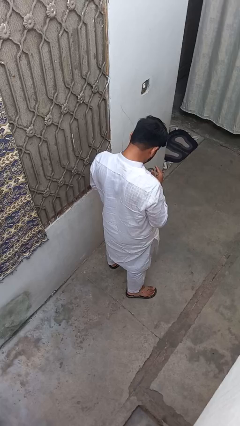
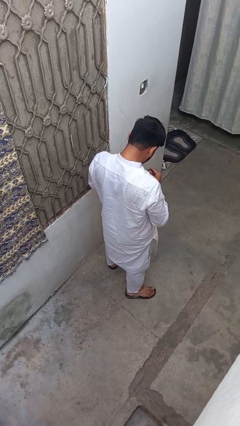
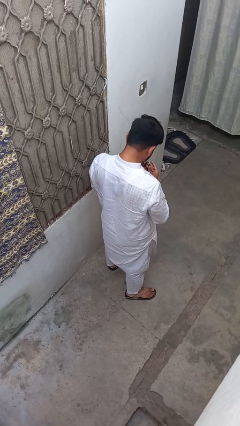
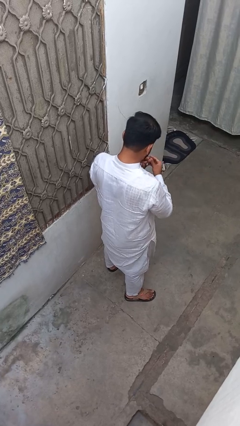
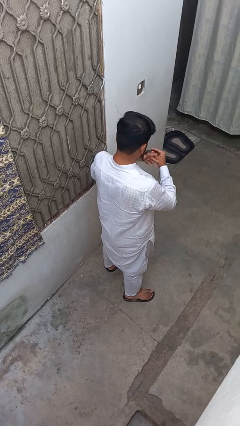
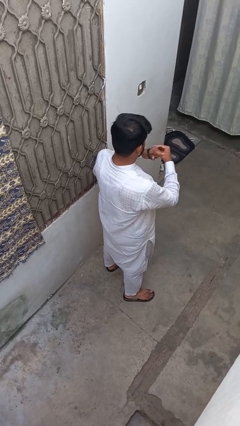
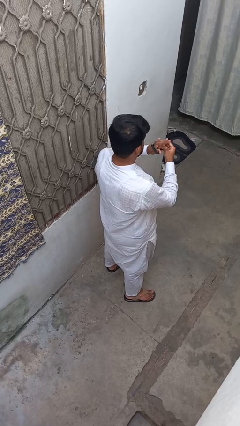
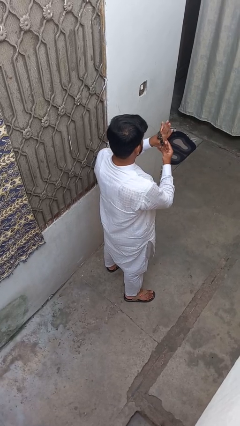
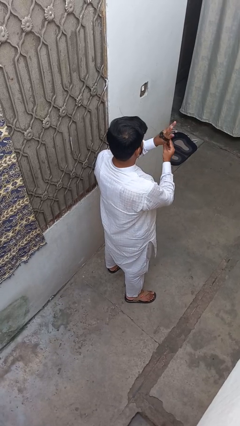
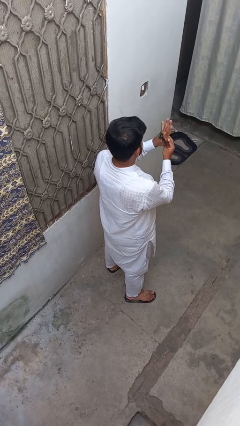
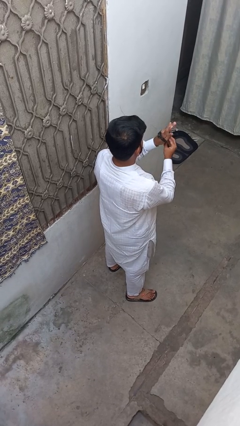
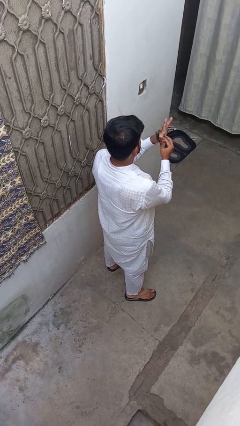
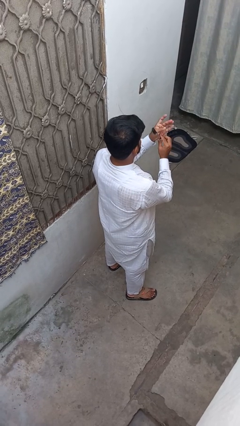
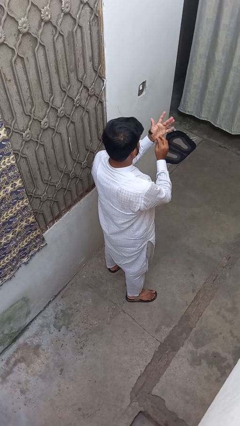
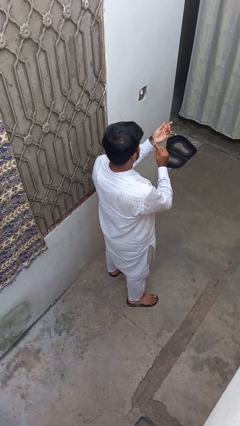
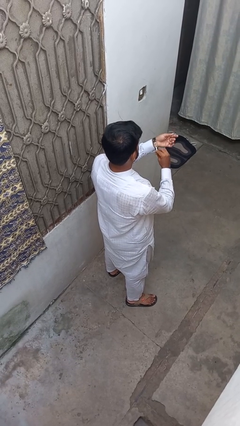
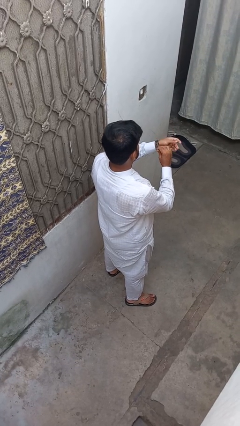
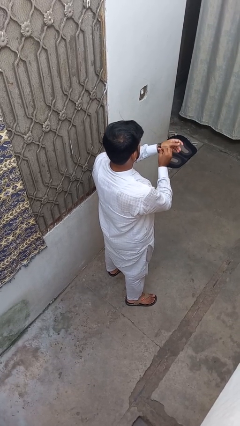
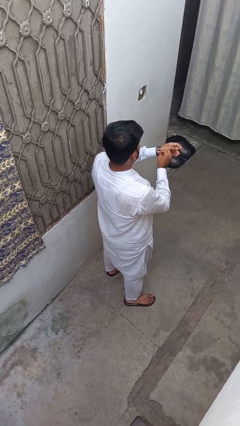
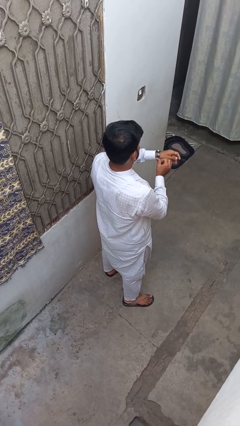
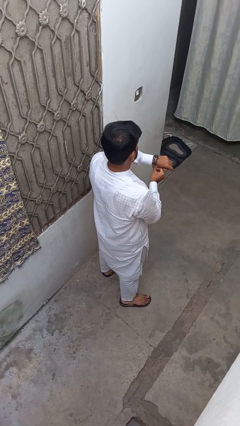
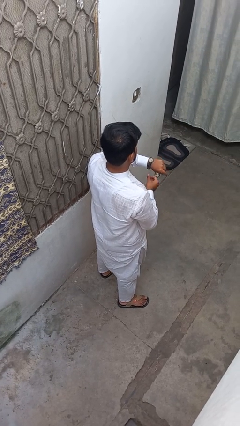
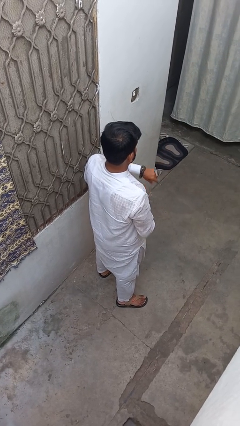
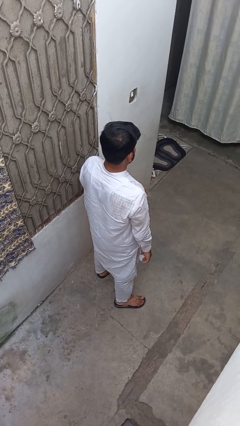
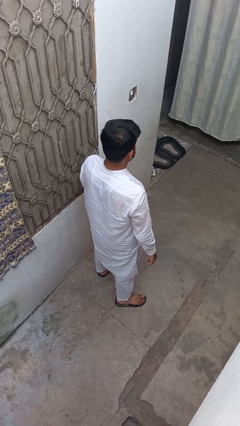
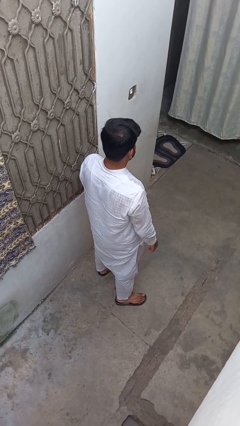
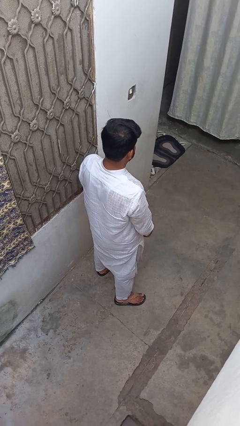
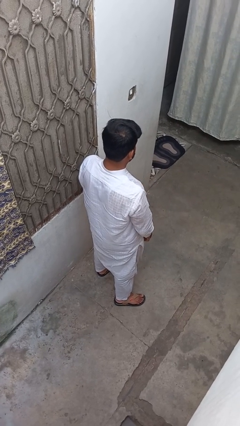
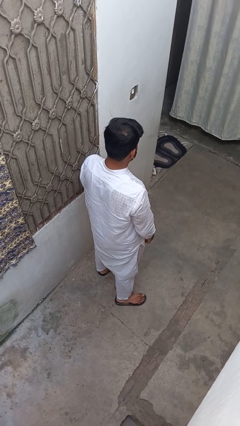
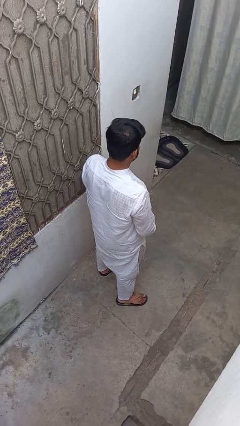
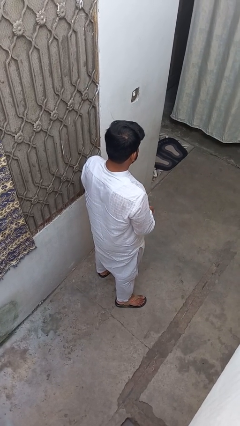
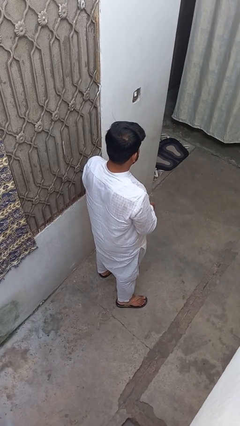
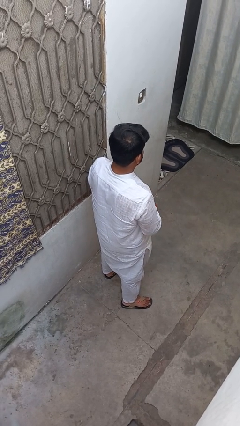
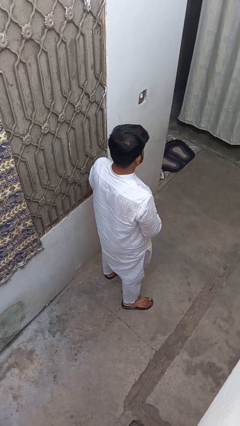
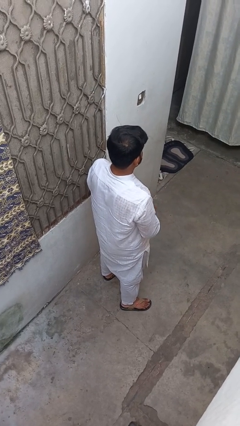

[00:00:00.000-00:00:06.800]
person puts on wristwatch

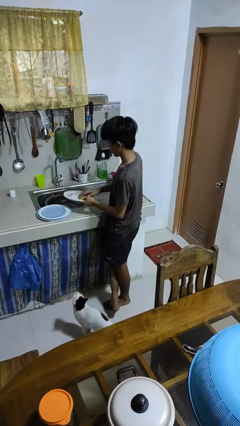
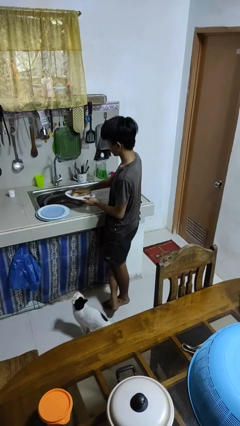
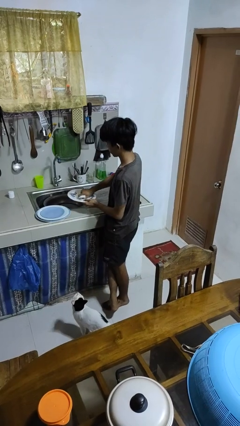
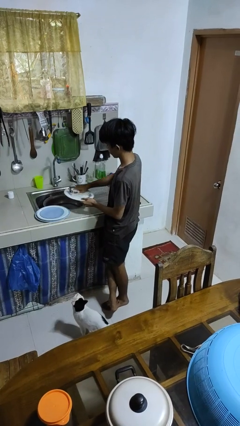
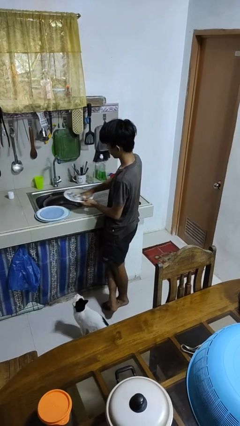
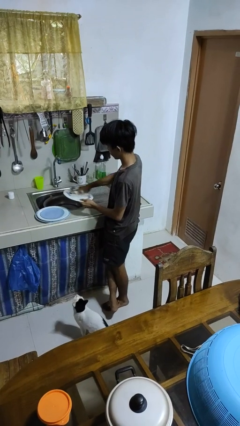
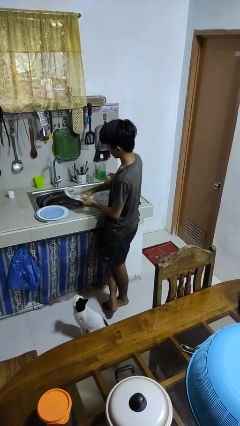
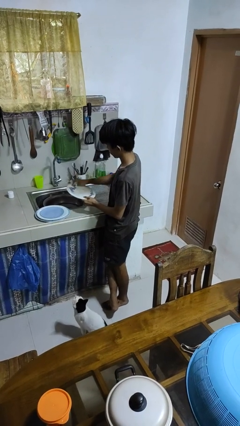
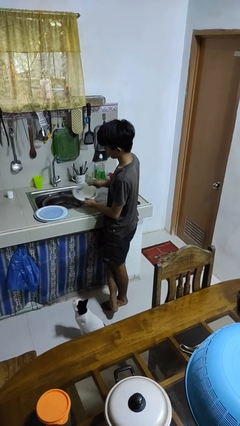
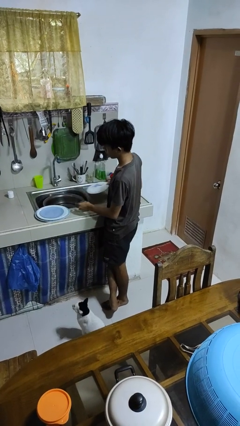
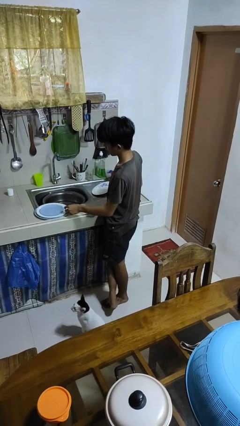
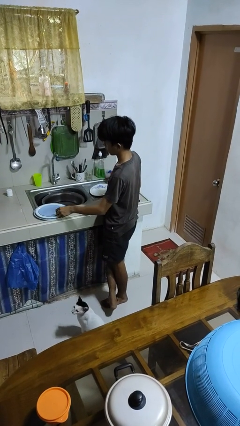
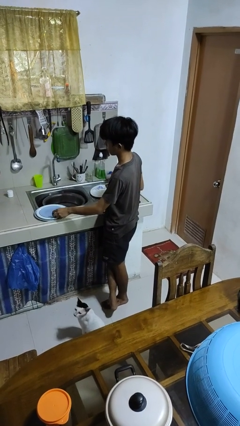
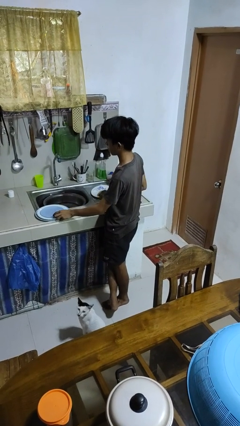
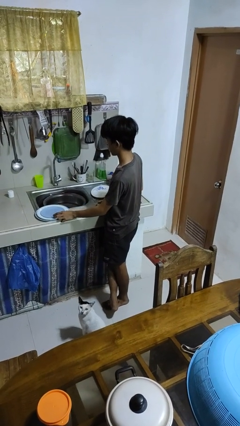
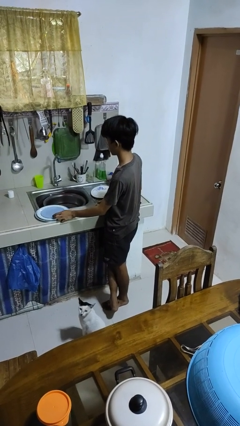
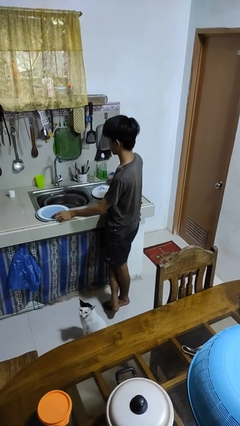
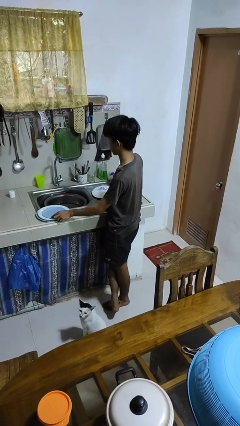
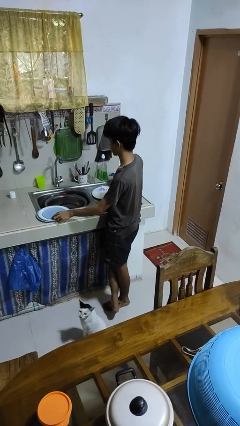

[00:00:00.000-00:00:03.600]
person washes hands

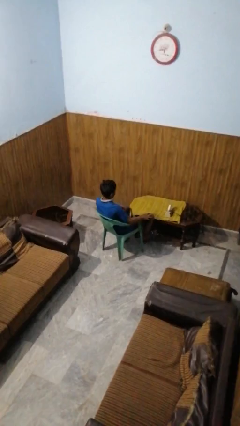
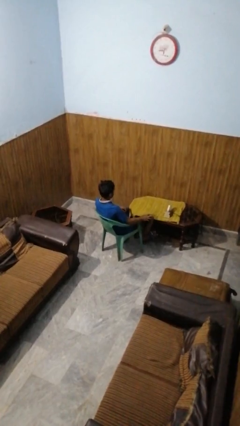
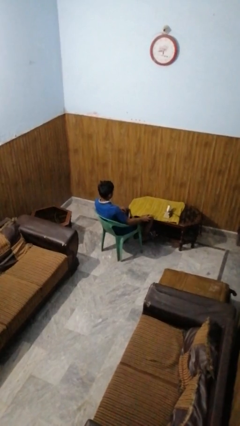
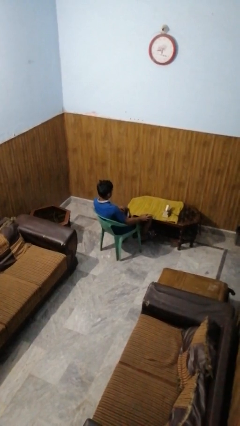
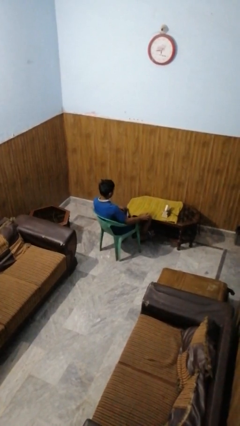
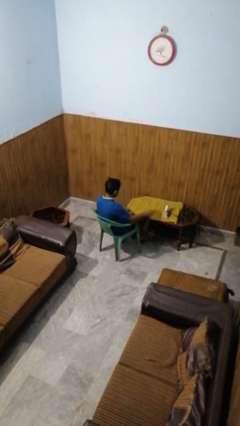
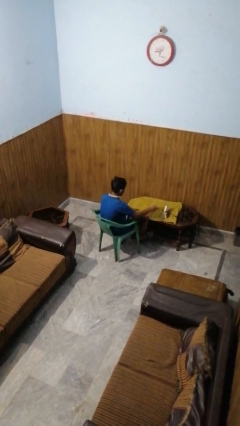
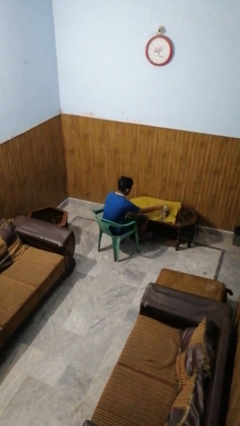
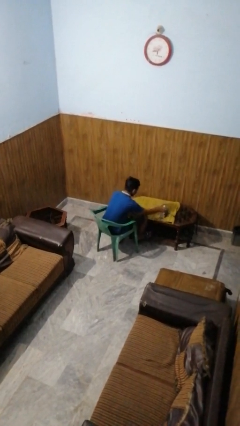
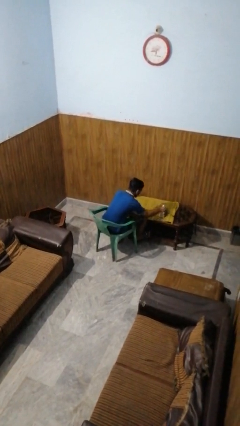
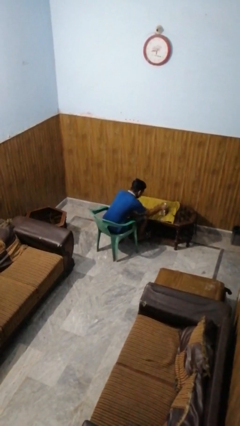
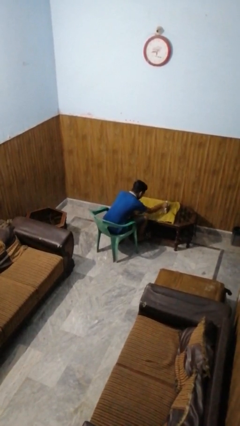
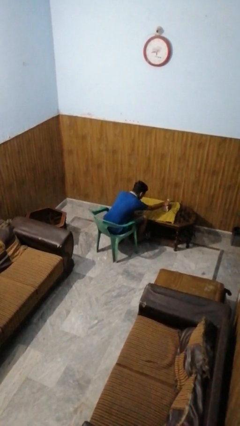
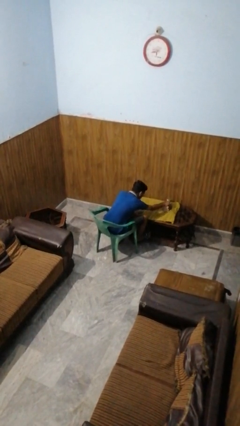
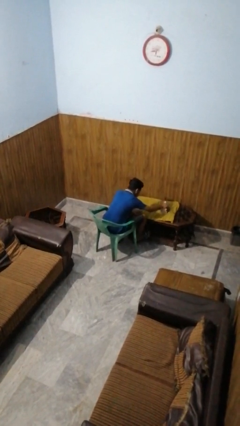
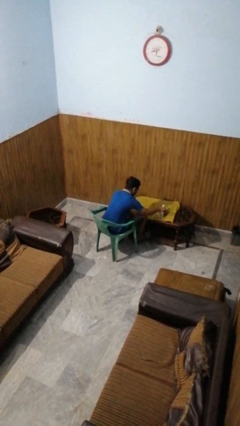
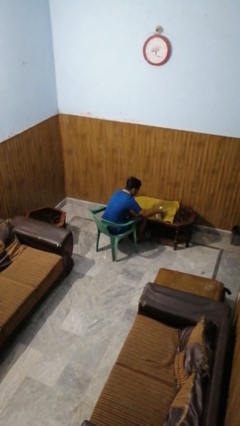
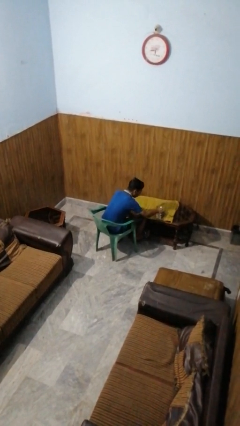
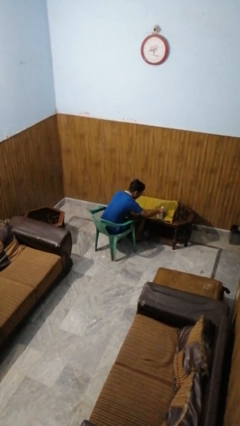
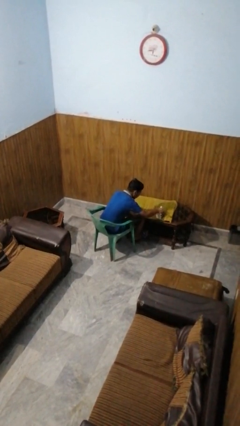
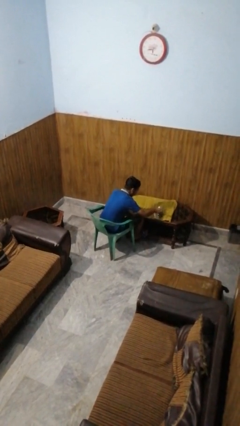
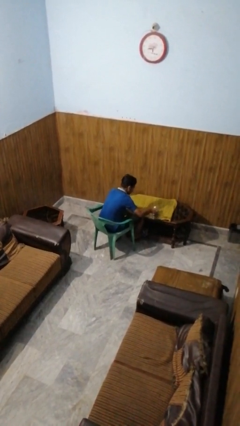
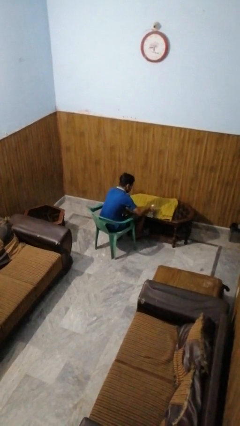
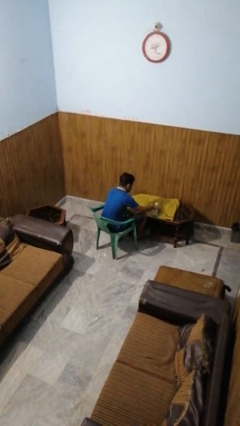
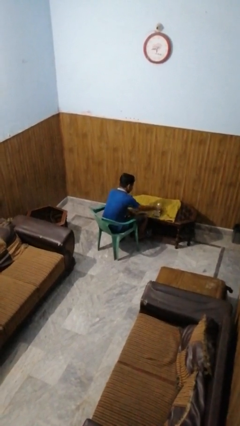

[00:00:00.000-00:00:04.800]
person irons clothes

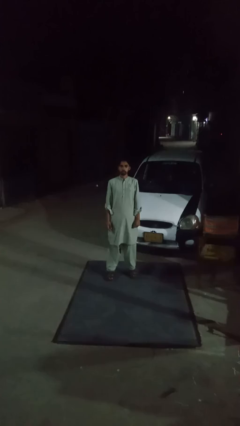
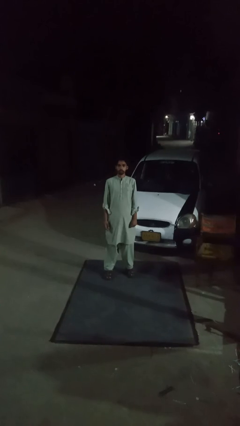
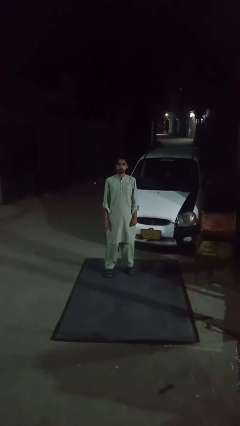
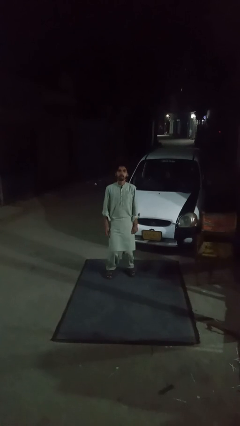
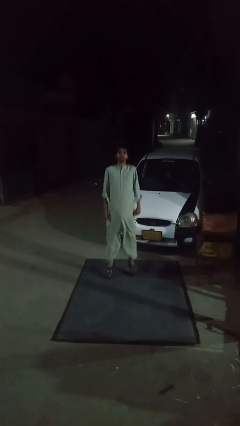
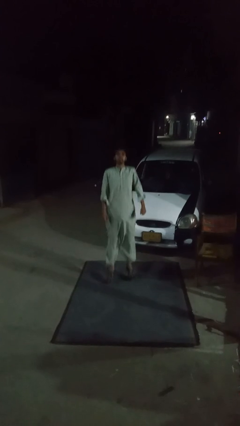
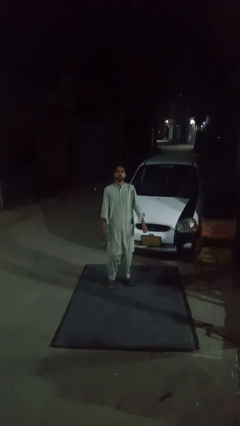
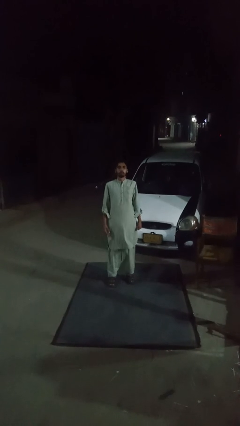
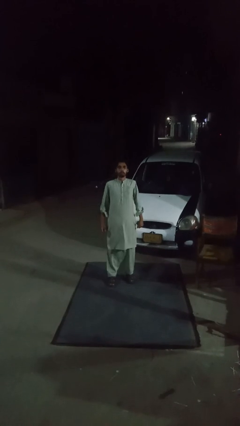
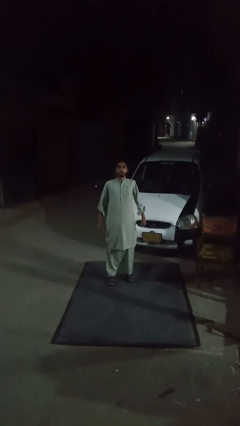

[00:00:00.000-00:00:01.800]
person exercises with jumping jacks

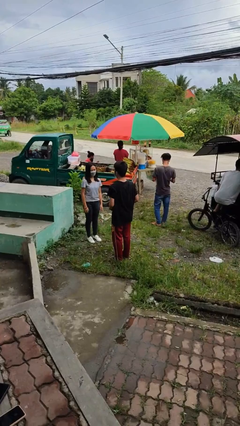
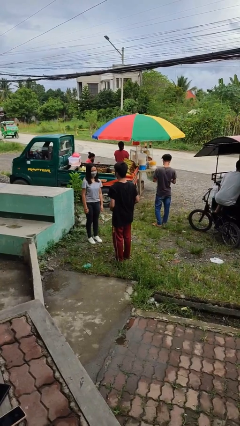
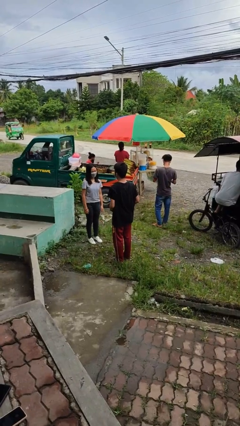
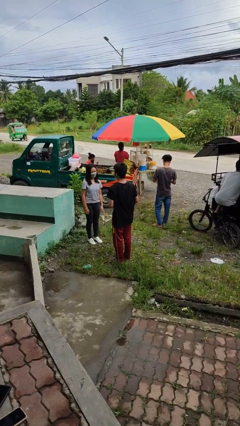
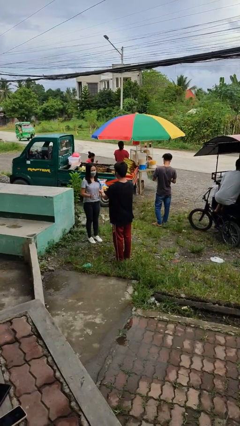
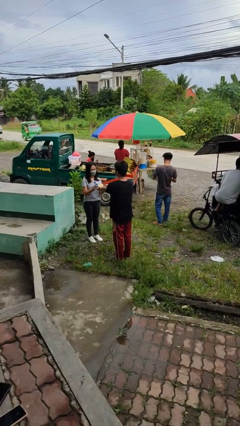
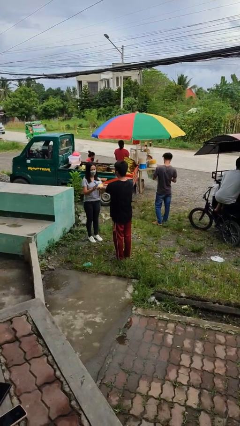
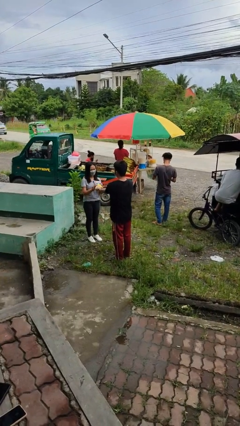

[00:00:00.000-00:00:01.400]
person transfers object to person
